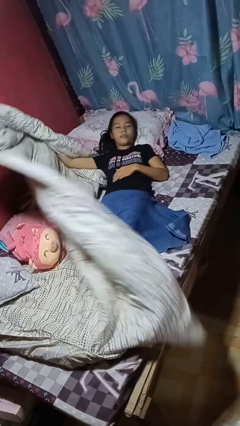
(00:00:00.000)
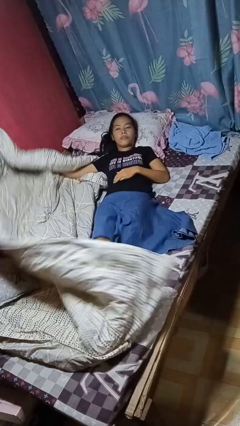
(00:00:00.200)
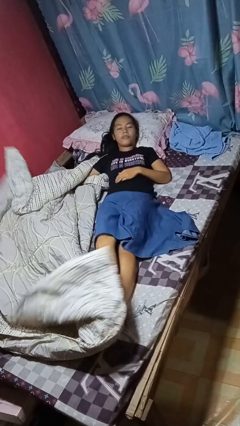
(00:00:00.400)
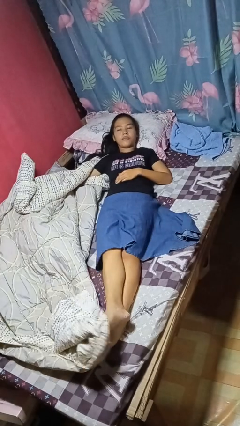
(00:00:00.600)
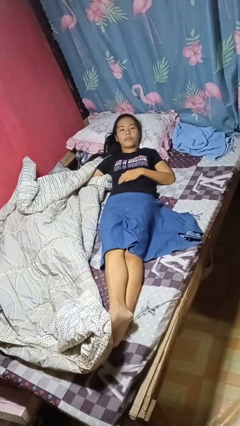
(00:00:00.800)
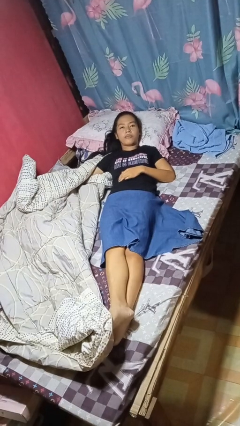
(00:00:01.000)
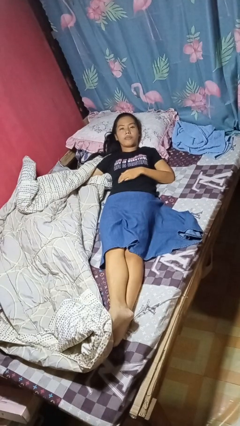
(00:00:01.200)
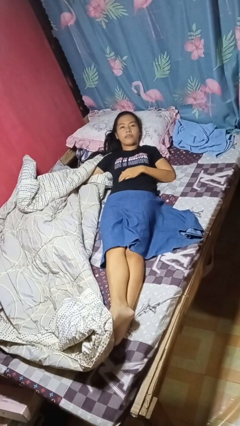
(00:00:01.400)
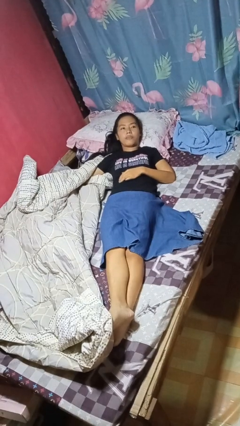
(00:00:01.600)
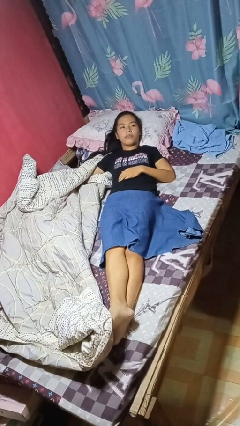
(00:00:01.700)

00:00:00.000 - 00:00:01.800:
person uncovers with bedsheets

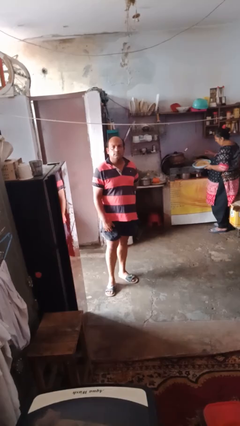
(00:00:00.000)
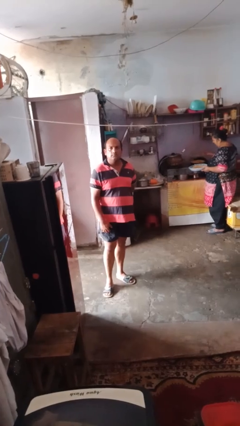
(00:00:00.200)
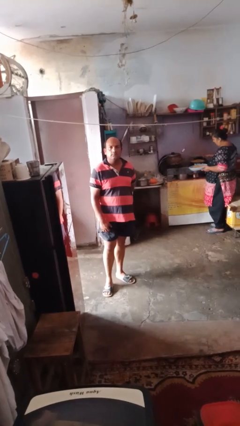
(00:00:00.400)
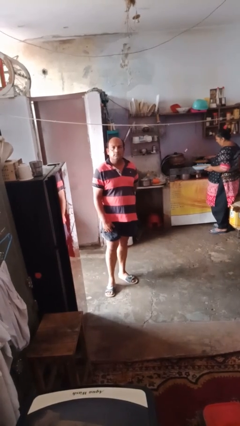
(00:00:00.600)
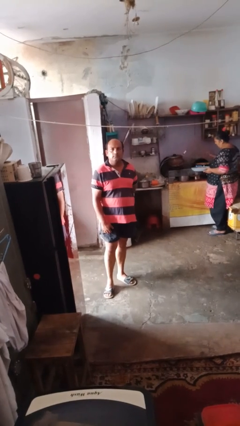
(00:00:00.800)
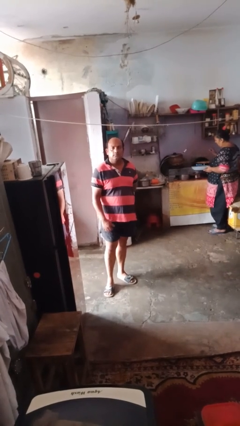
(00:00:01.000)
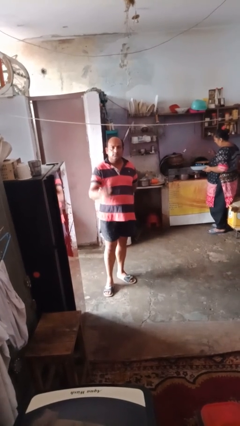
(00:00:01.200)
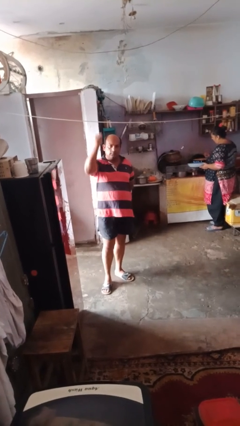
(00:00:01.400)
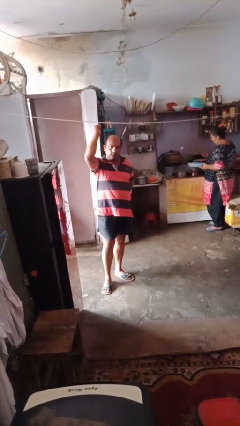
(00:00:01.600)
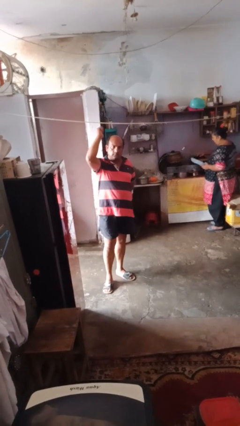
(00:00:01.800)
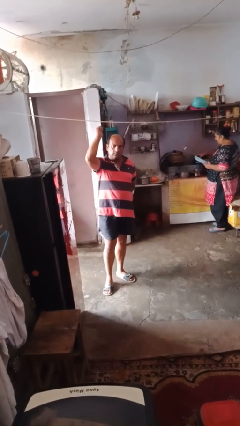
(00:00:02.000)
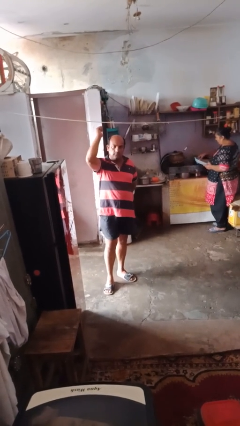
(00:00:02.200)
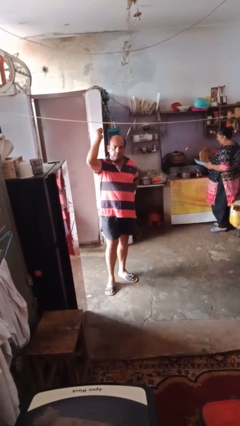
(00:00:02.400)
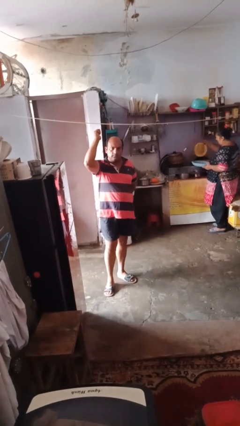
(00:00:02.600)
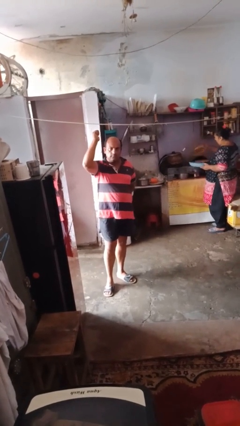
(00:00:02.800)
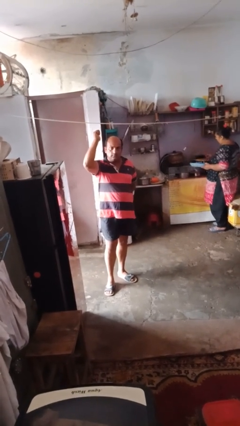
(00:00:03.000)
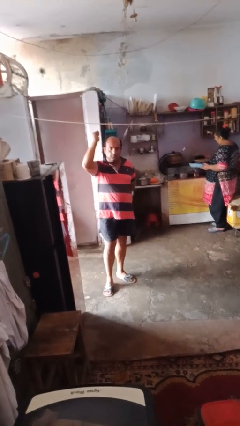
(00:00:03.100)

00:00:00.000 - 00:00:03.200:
person gestures behind me

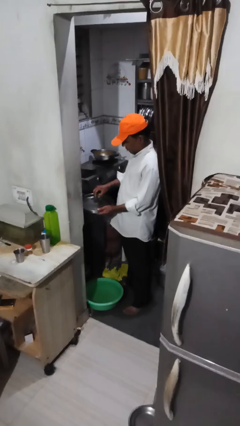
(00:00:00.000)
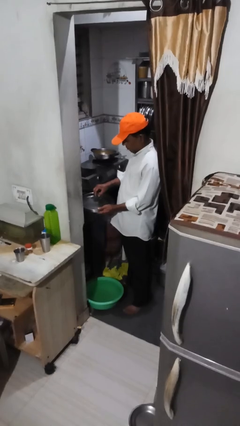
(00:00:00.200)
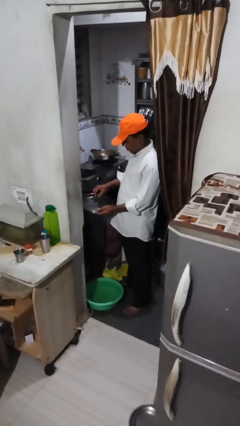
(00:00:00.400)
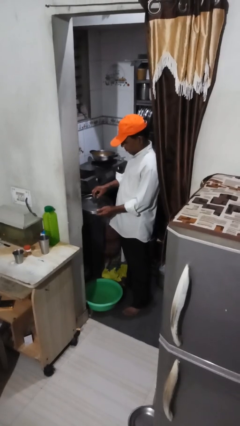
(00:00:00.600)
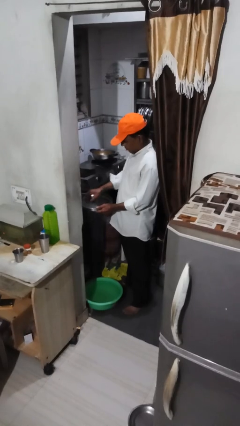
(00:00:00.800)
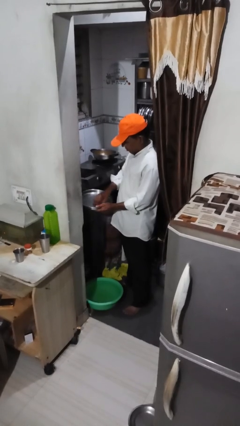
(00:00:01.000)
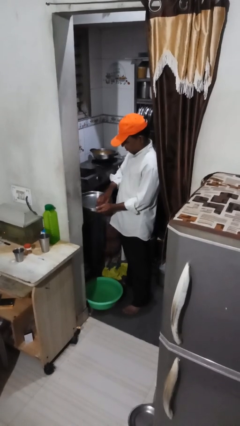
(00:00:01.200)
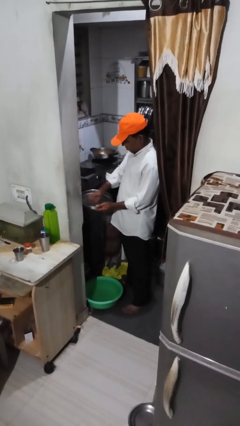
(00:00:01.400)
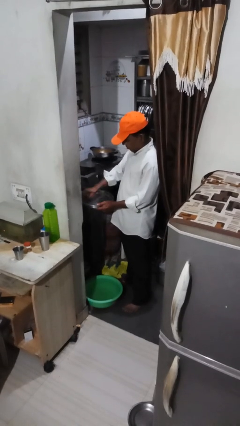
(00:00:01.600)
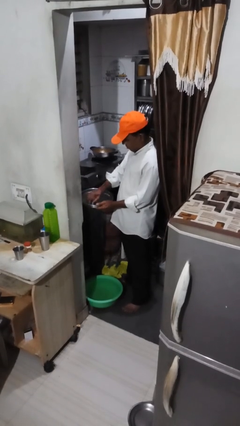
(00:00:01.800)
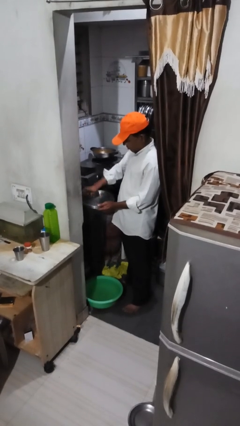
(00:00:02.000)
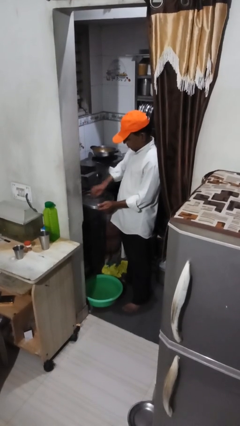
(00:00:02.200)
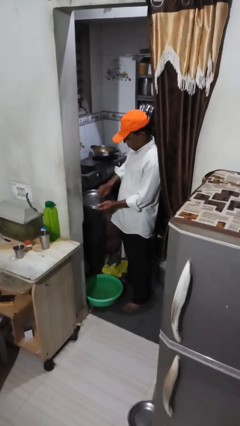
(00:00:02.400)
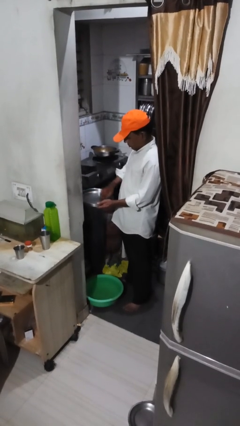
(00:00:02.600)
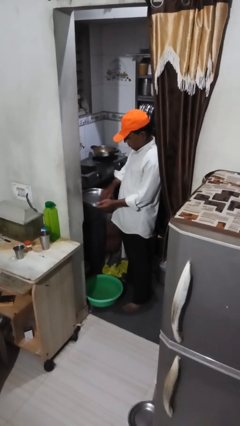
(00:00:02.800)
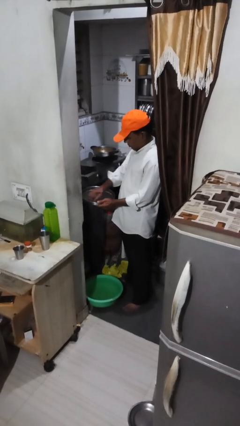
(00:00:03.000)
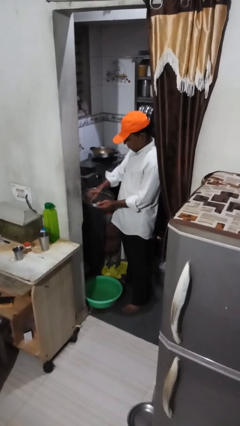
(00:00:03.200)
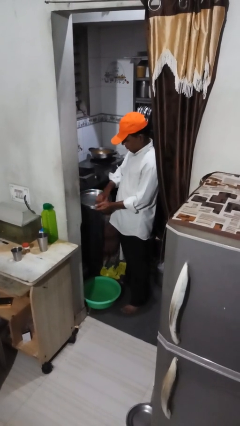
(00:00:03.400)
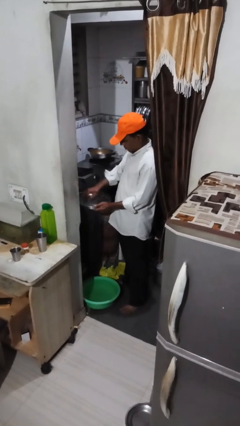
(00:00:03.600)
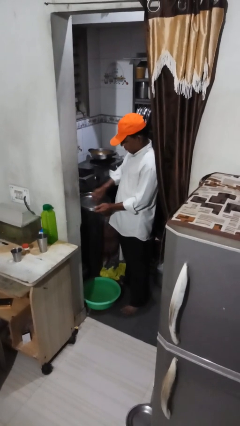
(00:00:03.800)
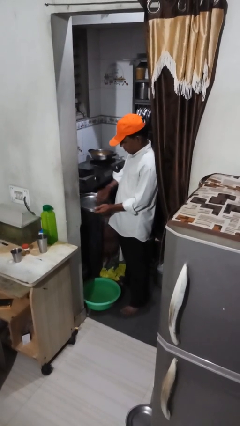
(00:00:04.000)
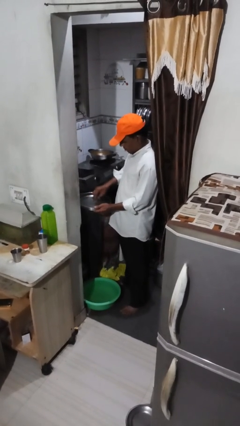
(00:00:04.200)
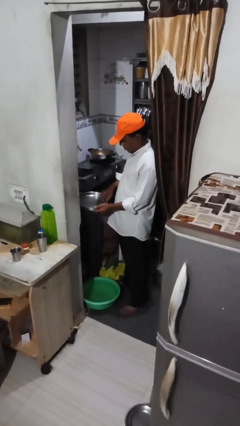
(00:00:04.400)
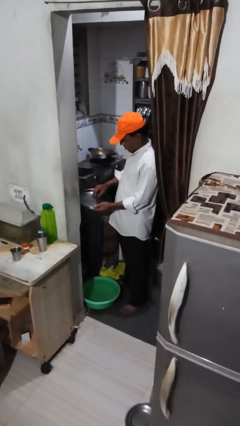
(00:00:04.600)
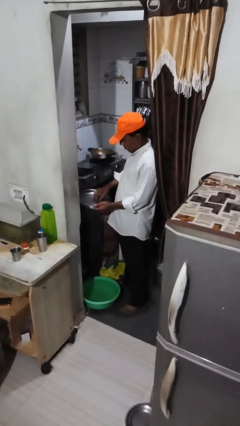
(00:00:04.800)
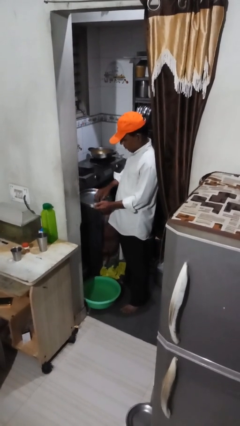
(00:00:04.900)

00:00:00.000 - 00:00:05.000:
person washes dish

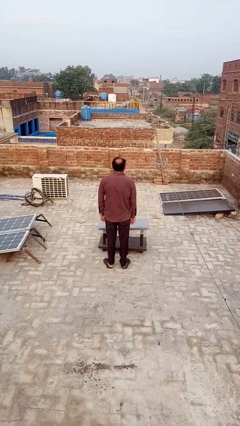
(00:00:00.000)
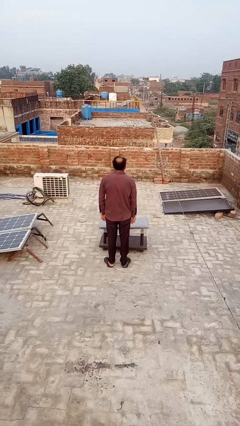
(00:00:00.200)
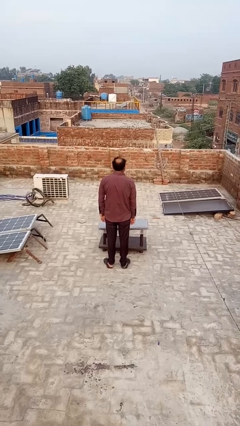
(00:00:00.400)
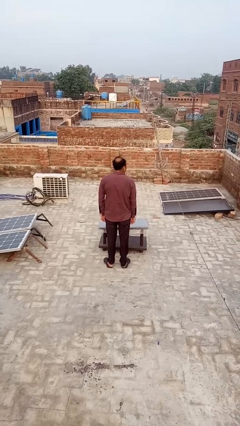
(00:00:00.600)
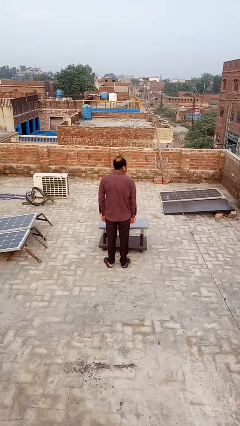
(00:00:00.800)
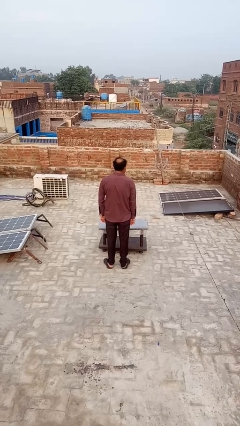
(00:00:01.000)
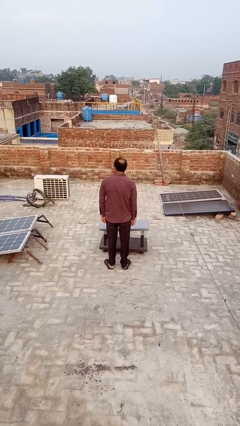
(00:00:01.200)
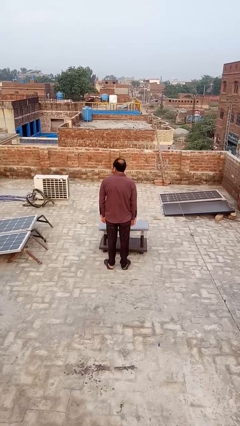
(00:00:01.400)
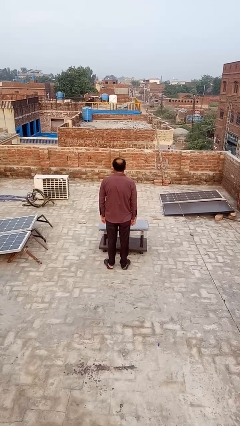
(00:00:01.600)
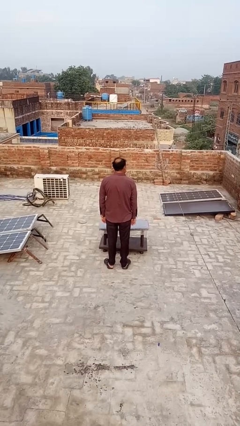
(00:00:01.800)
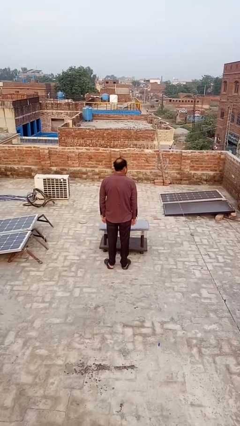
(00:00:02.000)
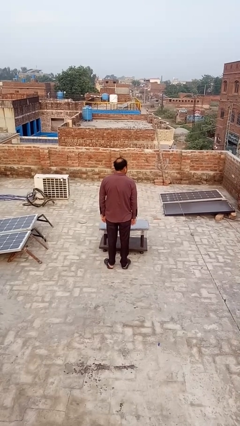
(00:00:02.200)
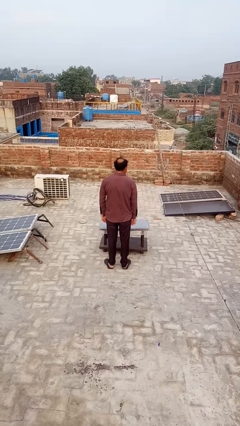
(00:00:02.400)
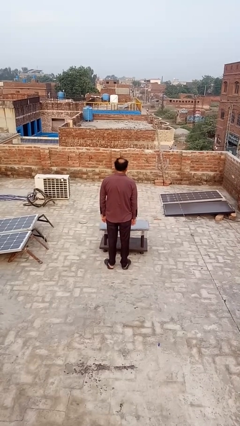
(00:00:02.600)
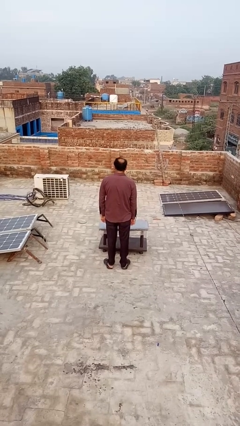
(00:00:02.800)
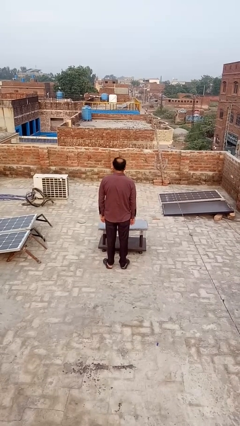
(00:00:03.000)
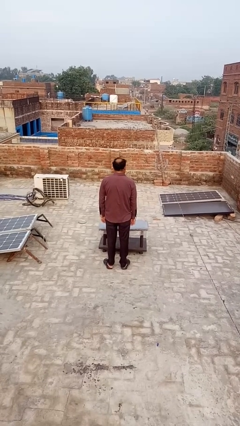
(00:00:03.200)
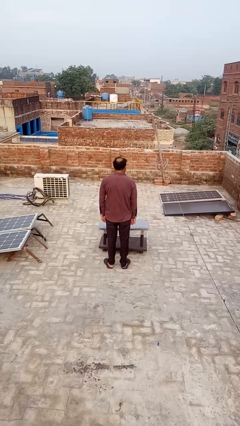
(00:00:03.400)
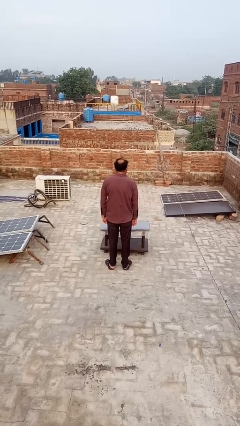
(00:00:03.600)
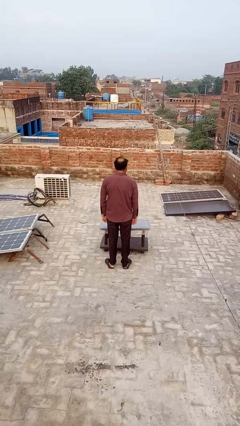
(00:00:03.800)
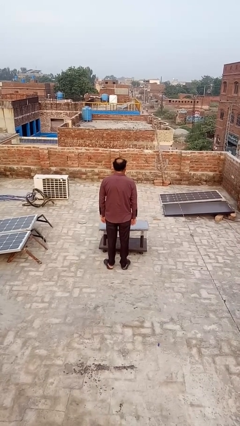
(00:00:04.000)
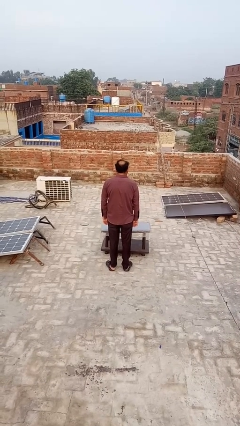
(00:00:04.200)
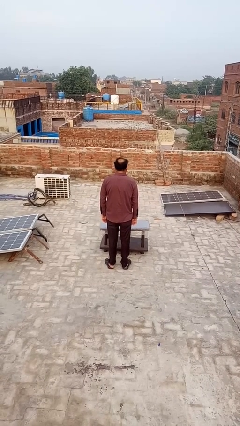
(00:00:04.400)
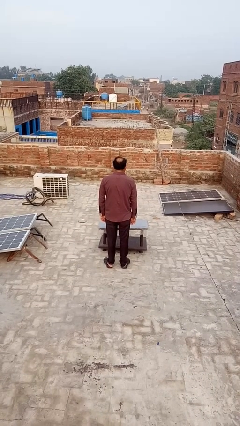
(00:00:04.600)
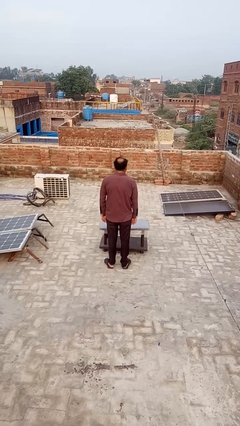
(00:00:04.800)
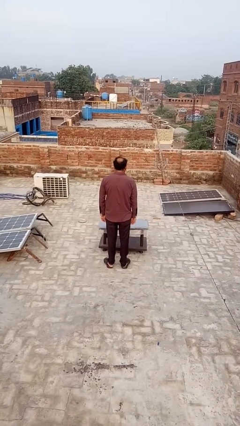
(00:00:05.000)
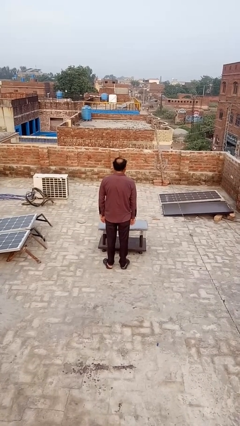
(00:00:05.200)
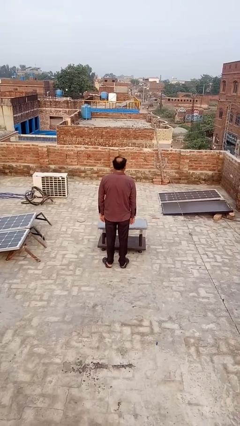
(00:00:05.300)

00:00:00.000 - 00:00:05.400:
person shakes head

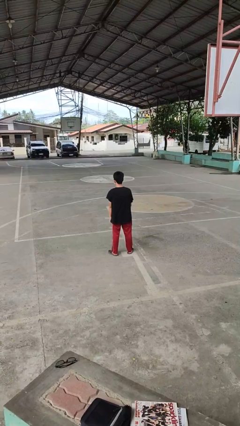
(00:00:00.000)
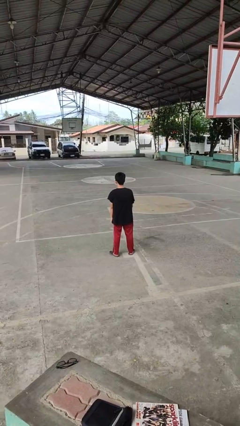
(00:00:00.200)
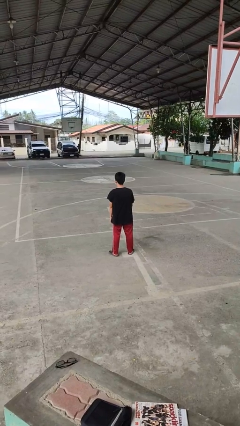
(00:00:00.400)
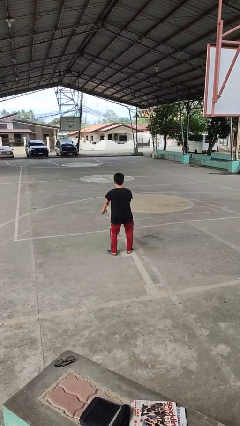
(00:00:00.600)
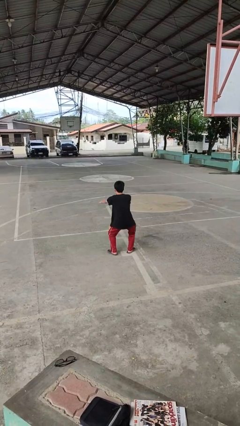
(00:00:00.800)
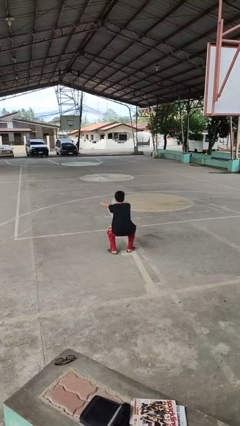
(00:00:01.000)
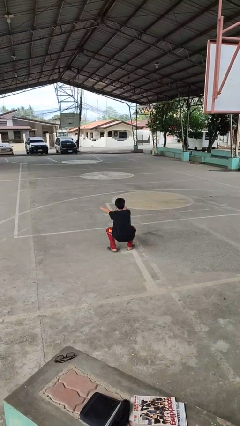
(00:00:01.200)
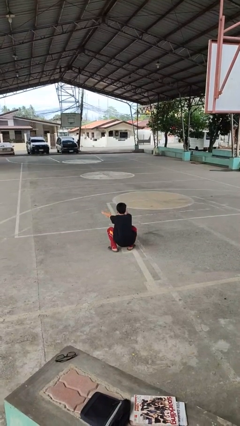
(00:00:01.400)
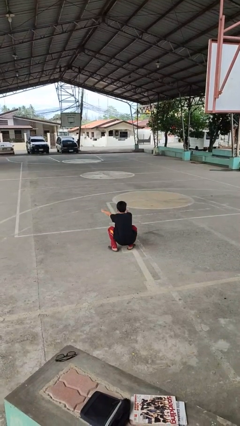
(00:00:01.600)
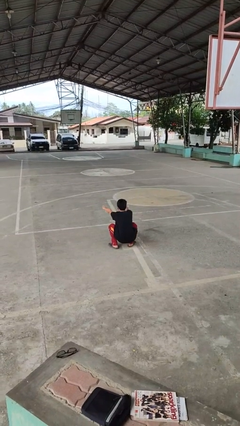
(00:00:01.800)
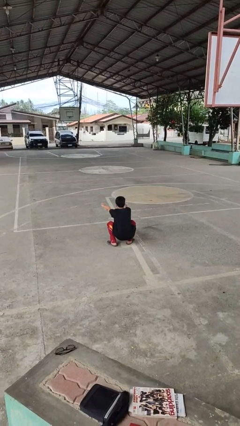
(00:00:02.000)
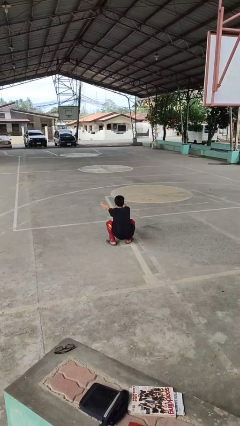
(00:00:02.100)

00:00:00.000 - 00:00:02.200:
person squats
